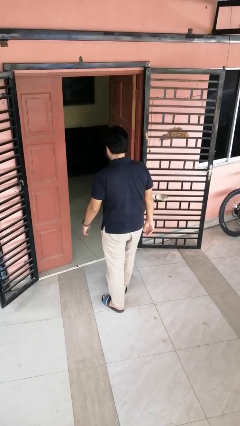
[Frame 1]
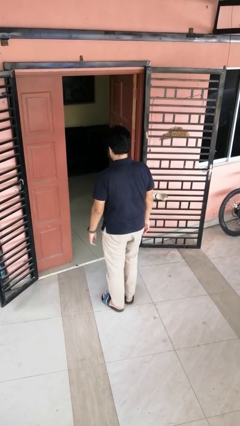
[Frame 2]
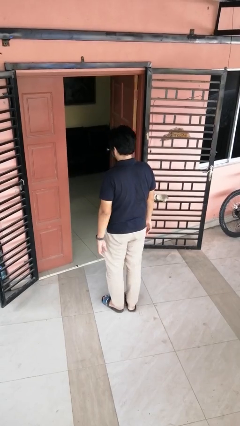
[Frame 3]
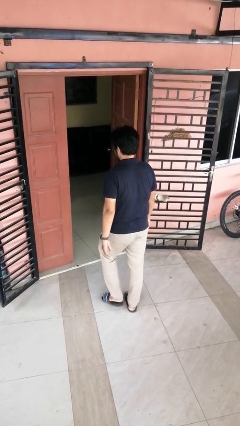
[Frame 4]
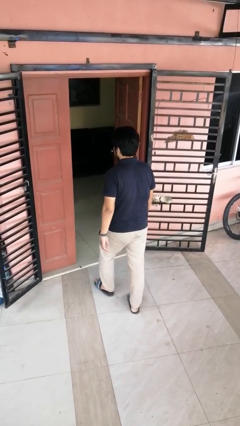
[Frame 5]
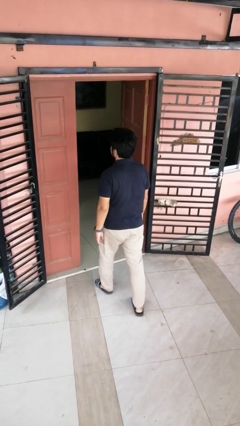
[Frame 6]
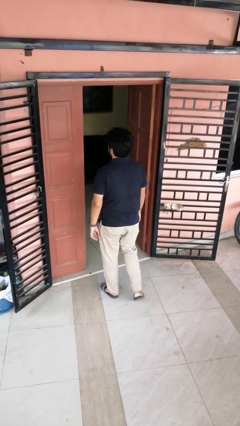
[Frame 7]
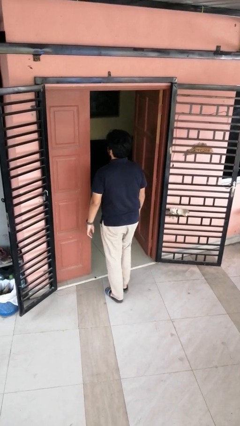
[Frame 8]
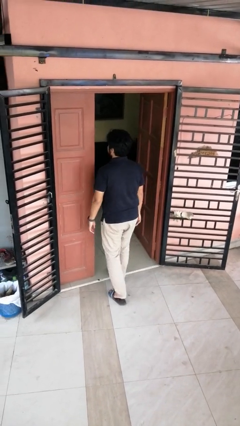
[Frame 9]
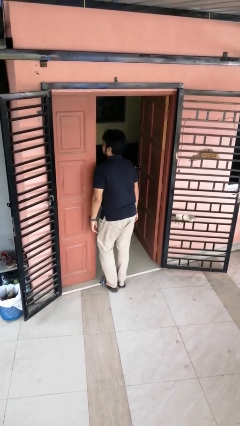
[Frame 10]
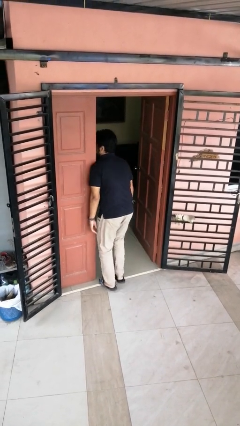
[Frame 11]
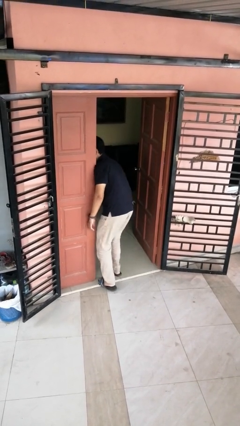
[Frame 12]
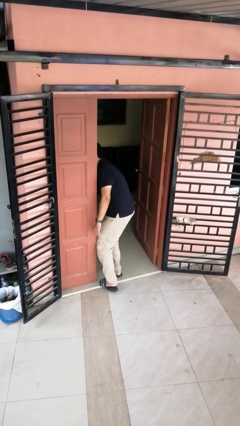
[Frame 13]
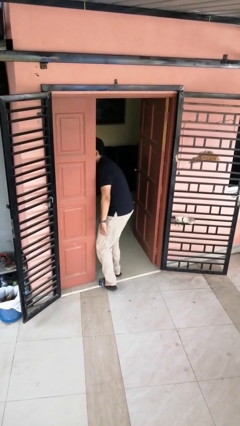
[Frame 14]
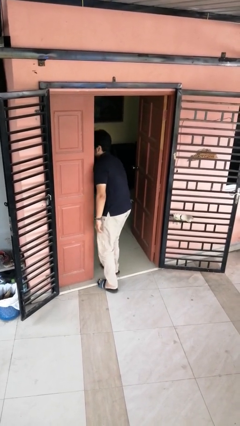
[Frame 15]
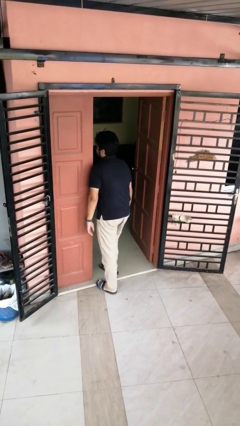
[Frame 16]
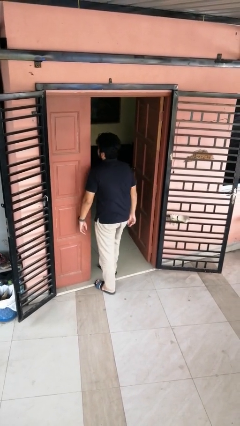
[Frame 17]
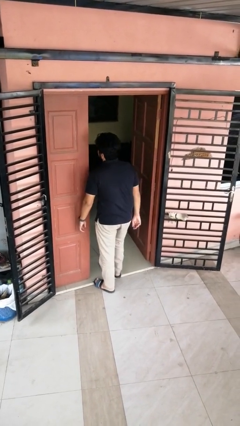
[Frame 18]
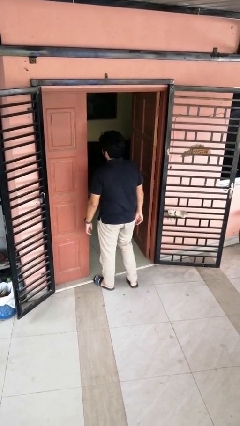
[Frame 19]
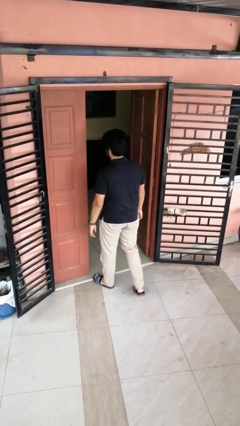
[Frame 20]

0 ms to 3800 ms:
person bumps into wall

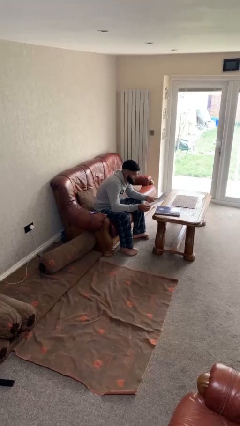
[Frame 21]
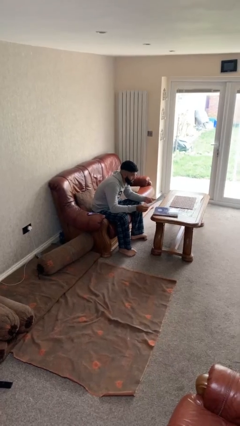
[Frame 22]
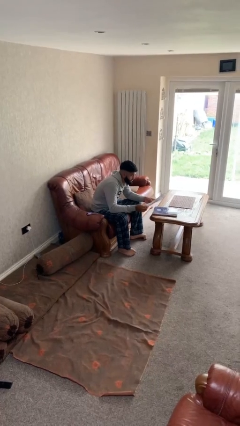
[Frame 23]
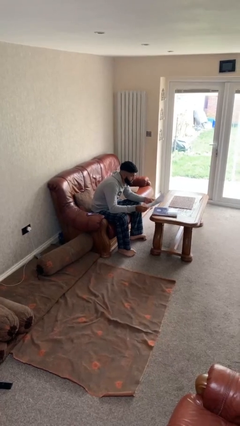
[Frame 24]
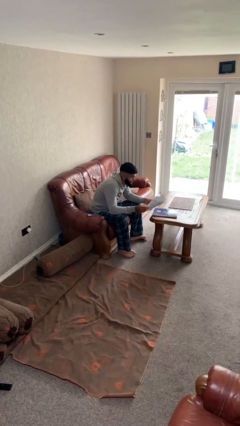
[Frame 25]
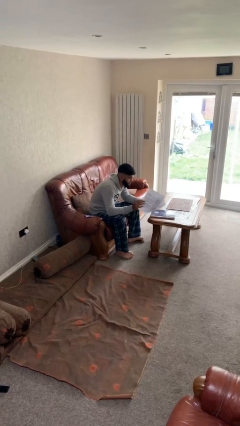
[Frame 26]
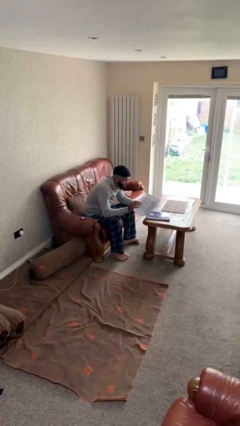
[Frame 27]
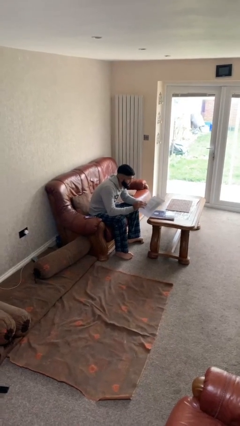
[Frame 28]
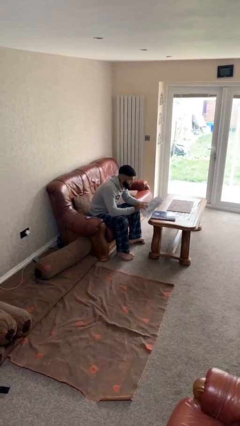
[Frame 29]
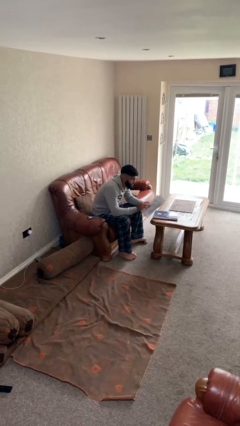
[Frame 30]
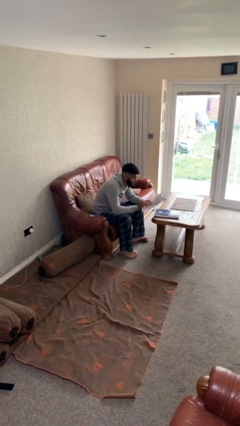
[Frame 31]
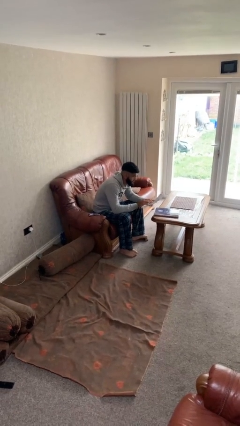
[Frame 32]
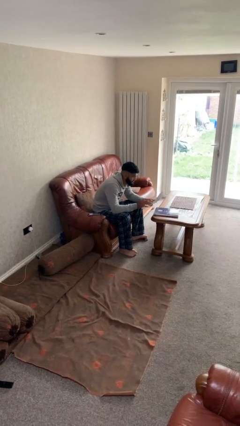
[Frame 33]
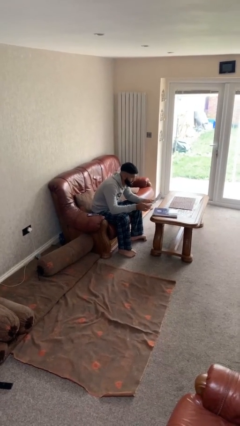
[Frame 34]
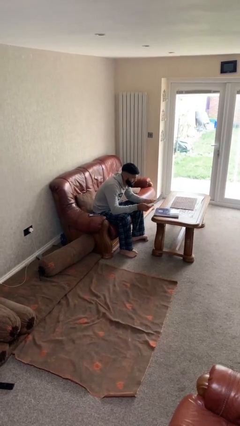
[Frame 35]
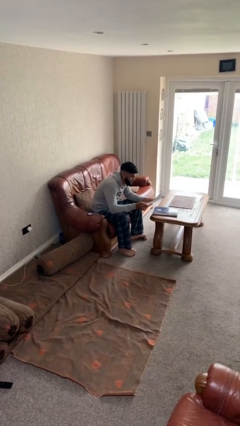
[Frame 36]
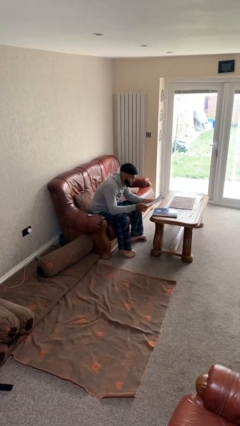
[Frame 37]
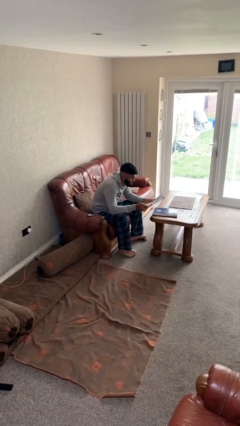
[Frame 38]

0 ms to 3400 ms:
person reads document

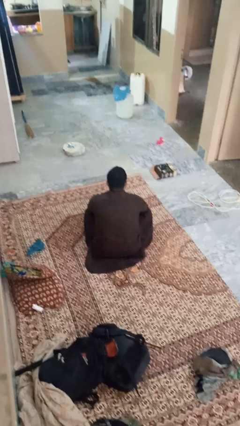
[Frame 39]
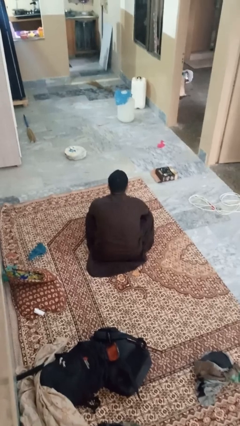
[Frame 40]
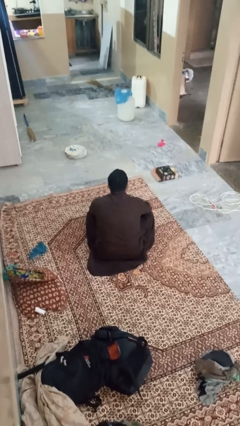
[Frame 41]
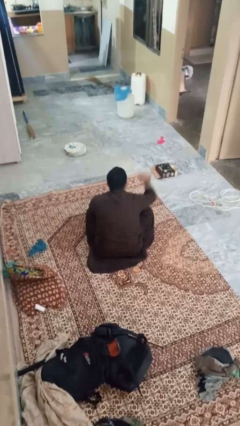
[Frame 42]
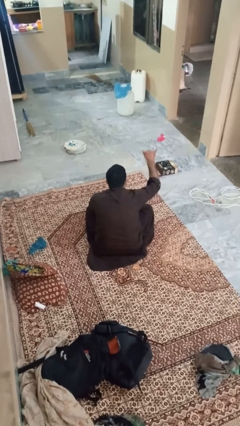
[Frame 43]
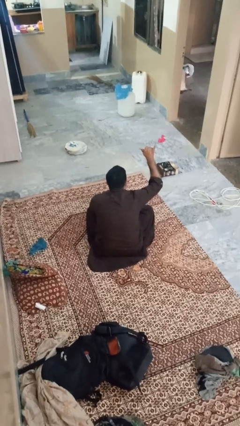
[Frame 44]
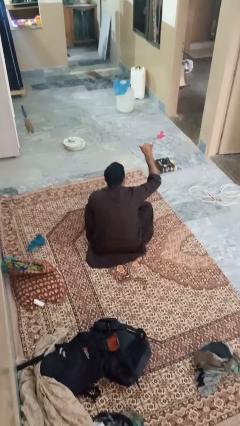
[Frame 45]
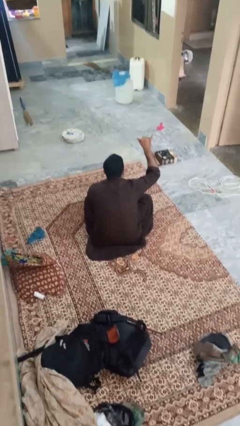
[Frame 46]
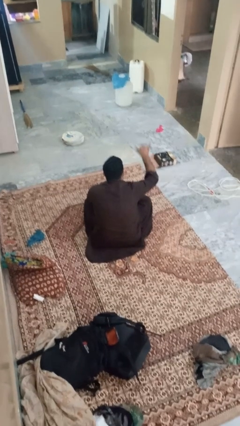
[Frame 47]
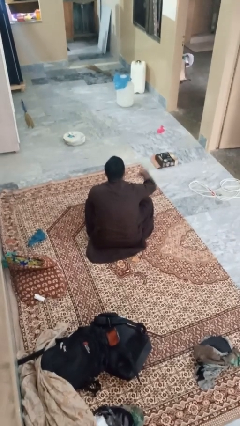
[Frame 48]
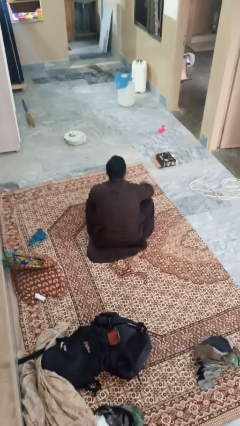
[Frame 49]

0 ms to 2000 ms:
person gestures hang loose

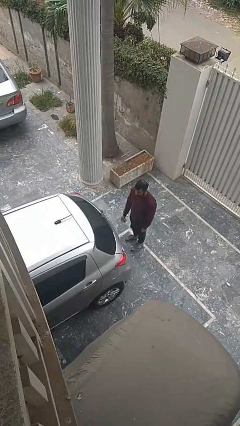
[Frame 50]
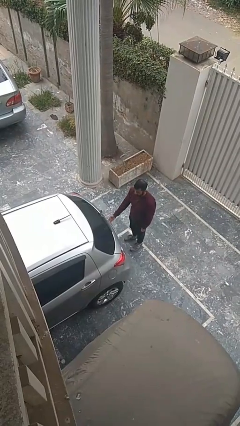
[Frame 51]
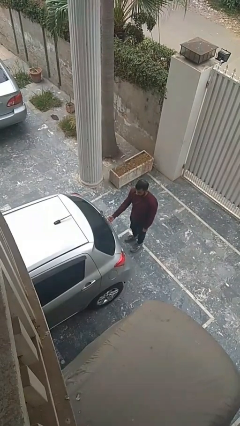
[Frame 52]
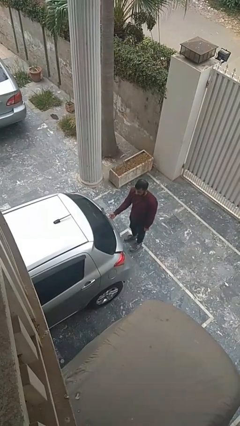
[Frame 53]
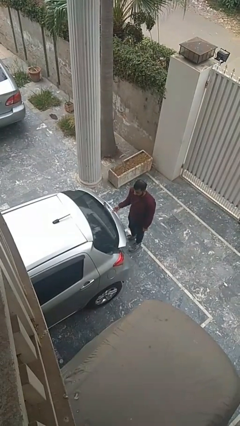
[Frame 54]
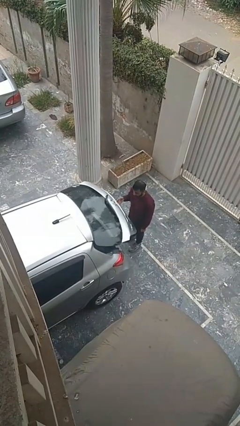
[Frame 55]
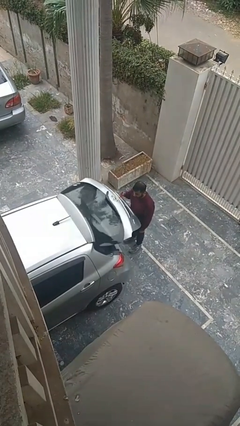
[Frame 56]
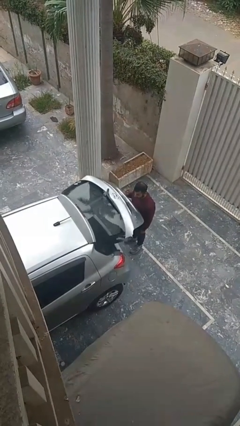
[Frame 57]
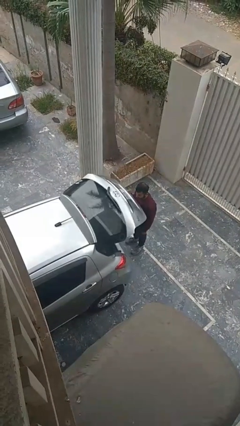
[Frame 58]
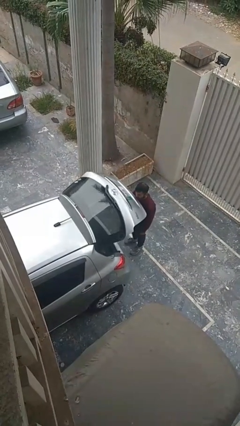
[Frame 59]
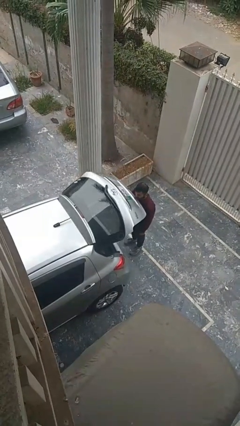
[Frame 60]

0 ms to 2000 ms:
person opens car trunk

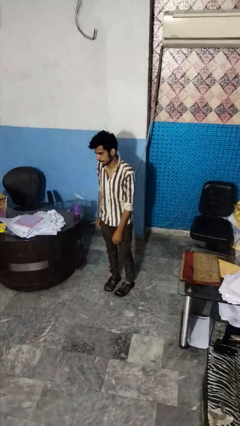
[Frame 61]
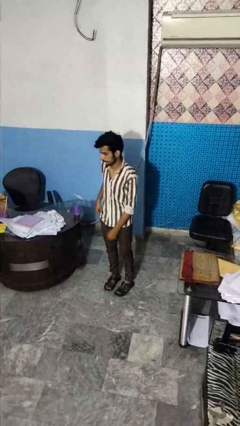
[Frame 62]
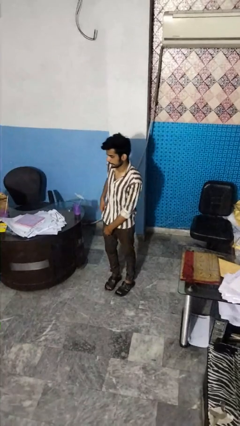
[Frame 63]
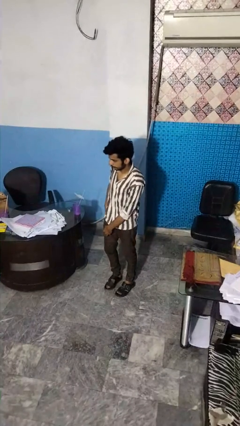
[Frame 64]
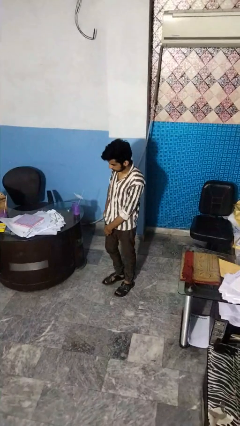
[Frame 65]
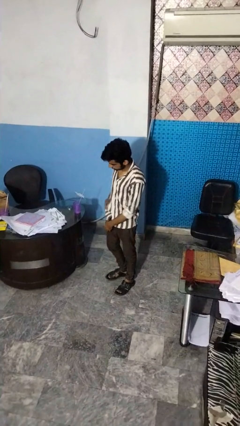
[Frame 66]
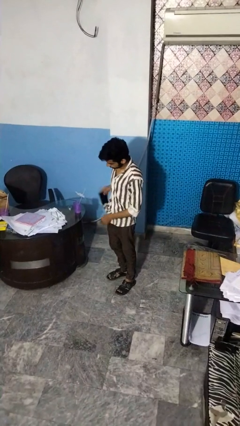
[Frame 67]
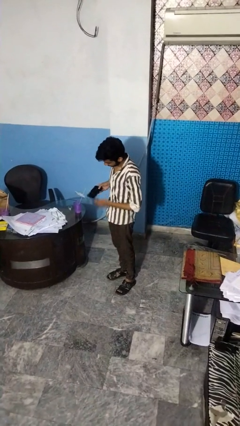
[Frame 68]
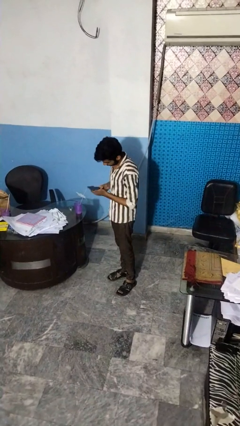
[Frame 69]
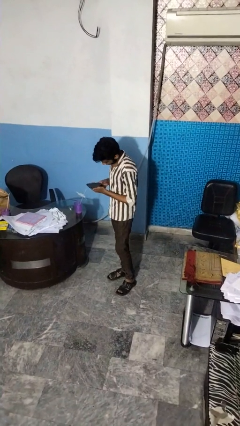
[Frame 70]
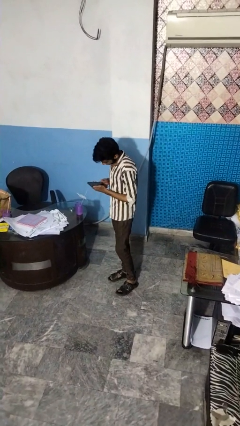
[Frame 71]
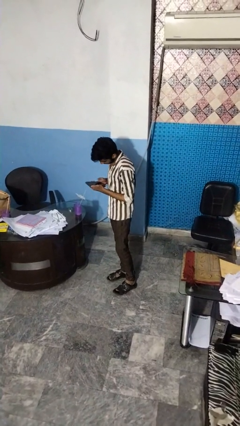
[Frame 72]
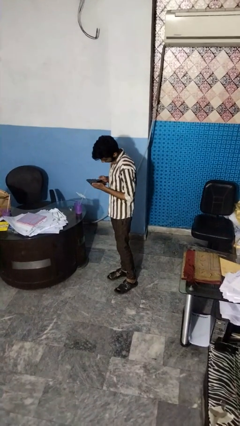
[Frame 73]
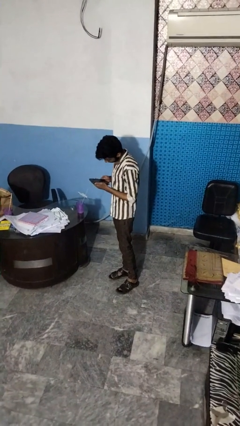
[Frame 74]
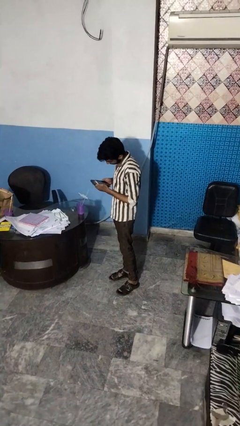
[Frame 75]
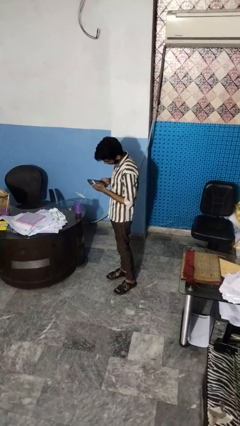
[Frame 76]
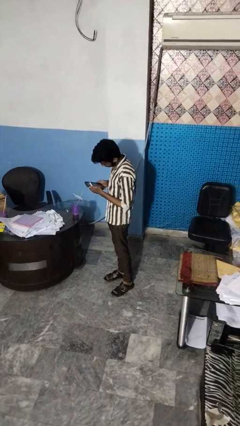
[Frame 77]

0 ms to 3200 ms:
person takes phone from pocket

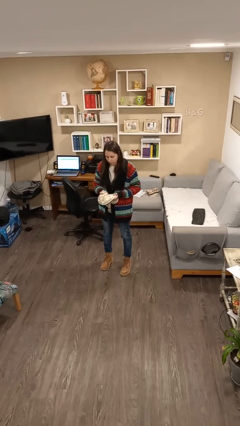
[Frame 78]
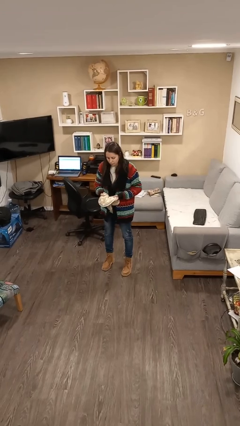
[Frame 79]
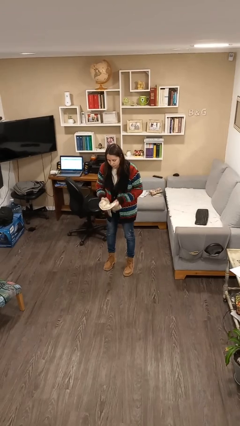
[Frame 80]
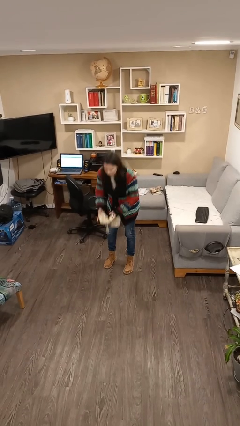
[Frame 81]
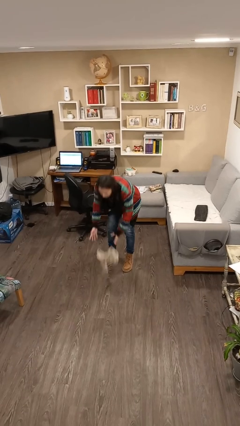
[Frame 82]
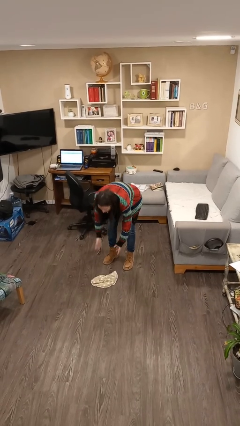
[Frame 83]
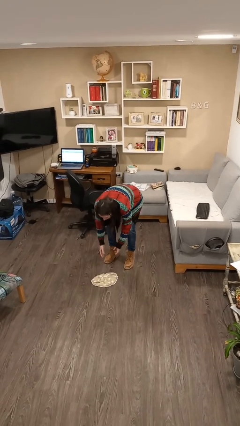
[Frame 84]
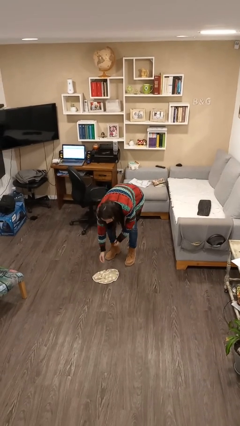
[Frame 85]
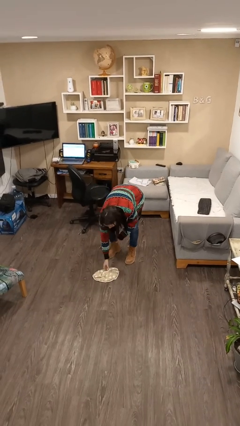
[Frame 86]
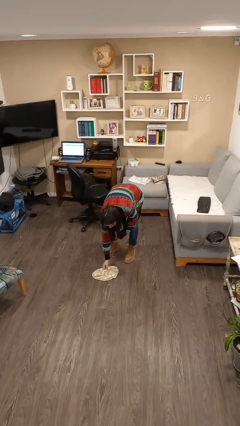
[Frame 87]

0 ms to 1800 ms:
person drops object

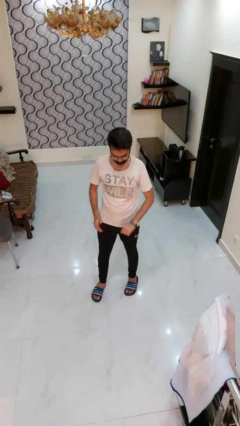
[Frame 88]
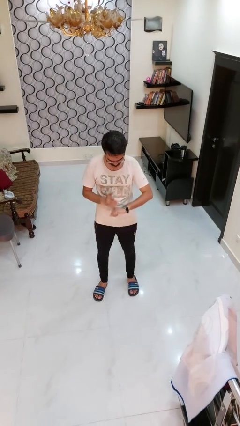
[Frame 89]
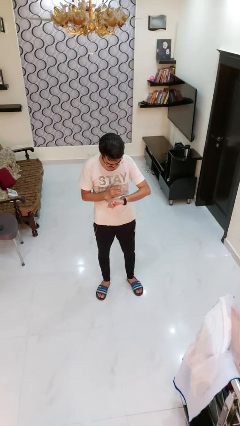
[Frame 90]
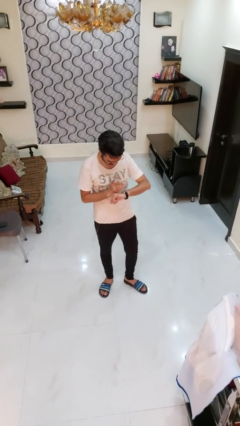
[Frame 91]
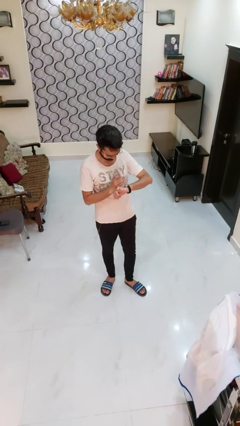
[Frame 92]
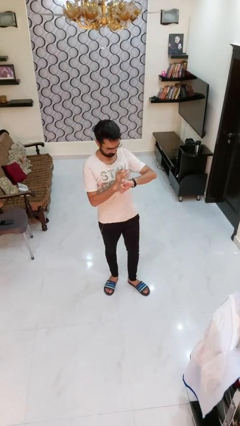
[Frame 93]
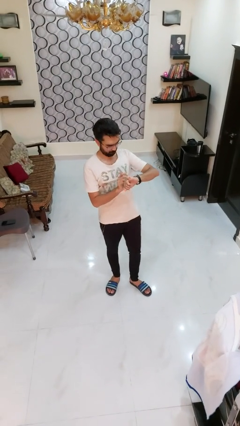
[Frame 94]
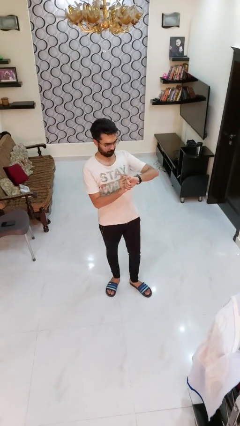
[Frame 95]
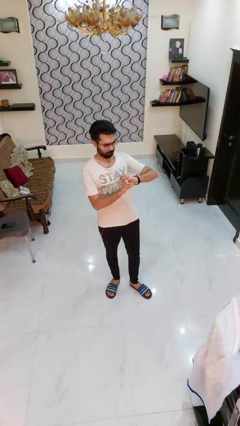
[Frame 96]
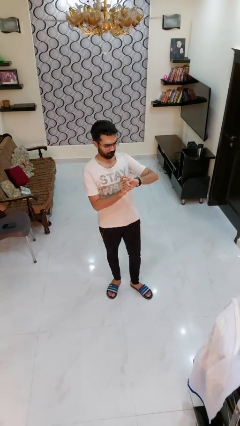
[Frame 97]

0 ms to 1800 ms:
person looks at wristwatch
